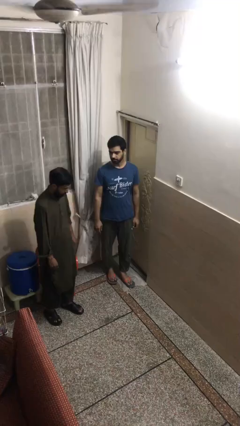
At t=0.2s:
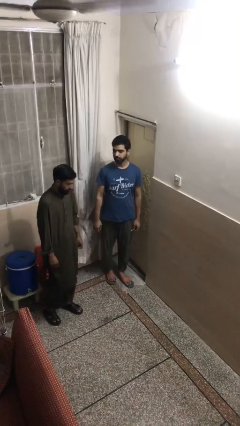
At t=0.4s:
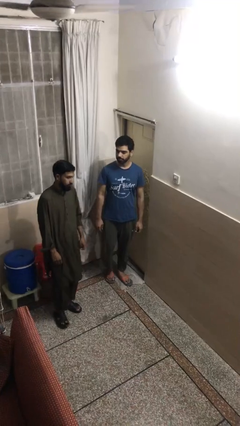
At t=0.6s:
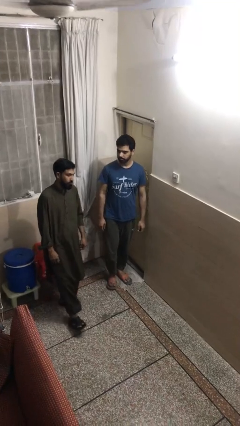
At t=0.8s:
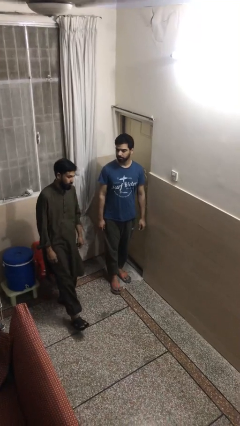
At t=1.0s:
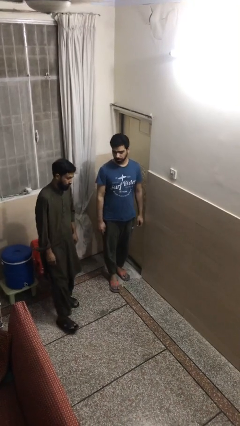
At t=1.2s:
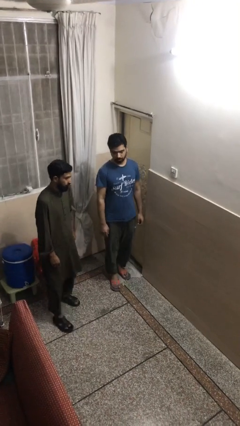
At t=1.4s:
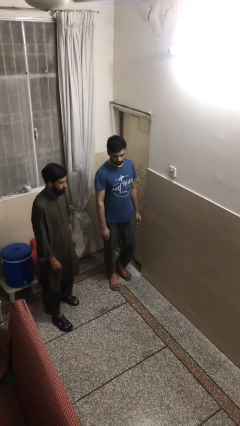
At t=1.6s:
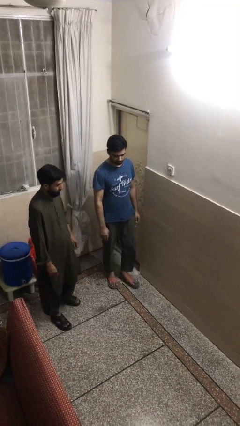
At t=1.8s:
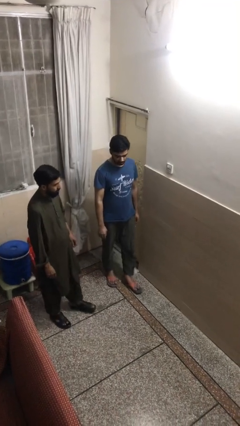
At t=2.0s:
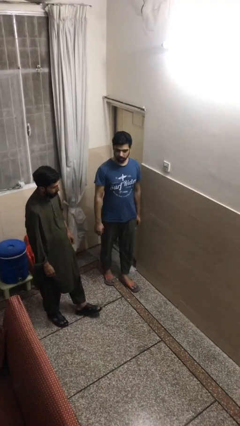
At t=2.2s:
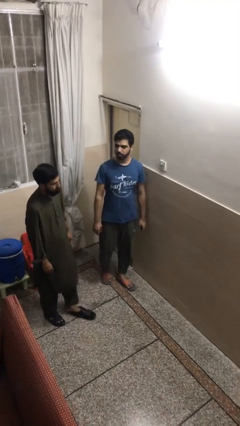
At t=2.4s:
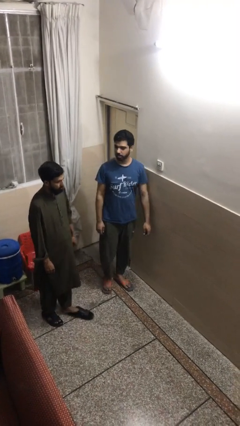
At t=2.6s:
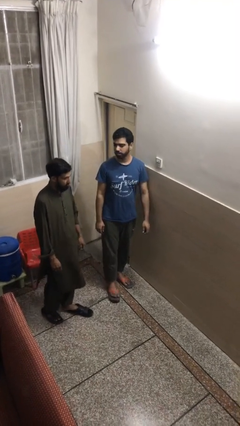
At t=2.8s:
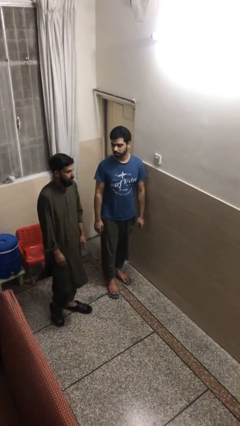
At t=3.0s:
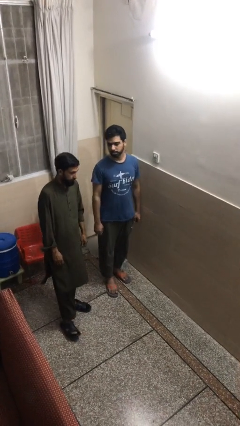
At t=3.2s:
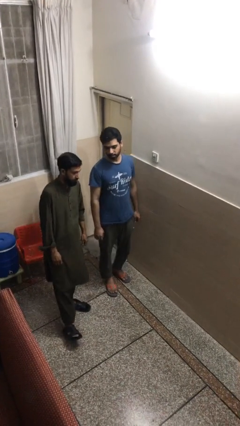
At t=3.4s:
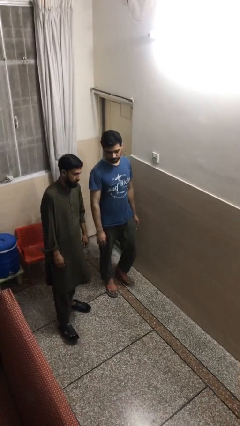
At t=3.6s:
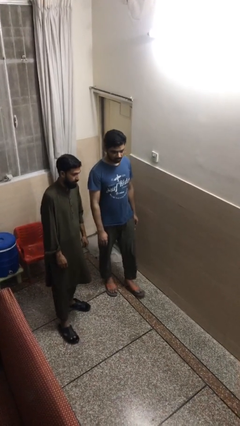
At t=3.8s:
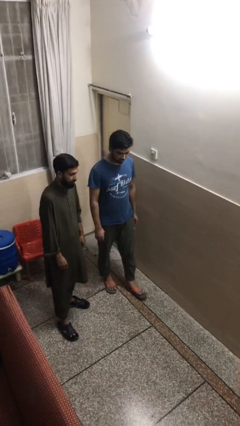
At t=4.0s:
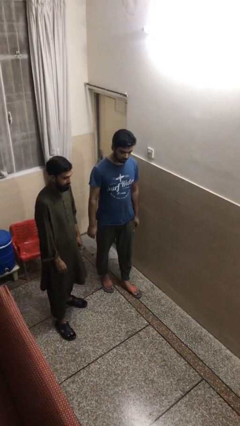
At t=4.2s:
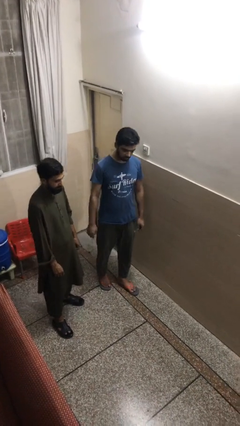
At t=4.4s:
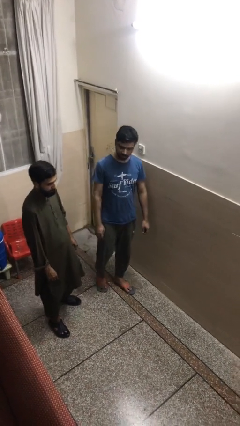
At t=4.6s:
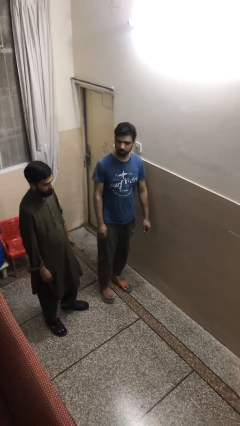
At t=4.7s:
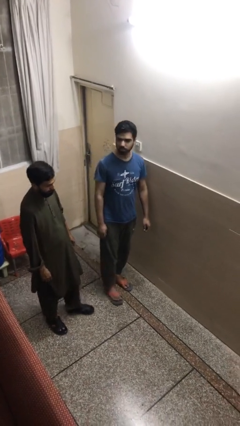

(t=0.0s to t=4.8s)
person talks to person

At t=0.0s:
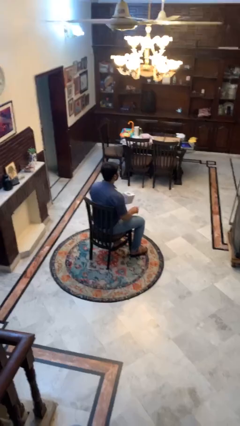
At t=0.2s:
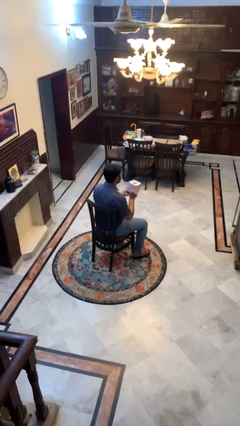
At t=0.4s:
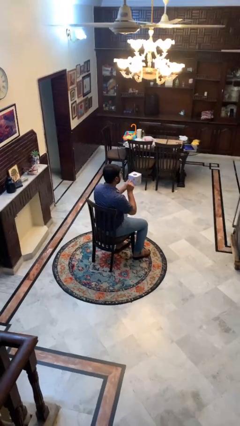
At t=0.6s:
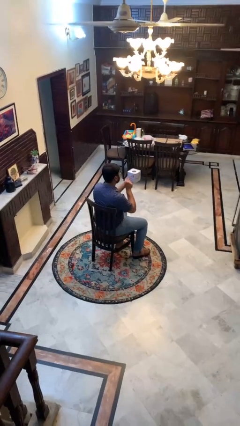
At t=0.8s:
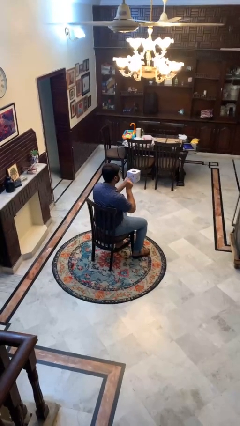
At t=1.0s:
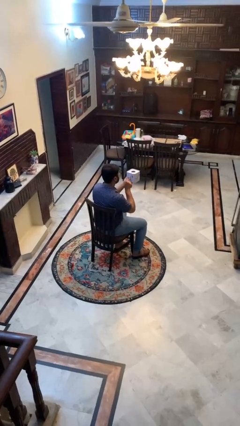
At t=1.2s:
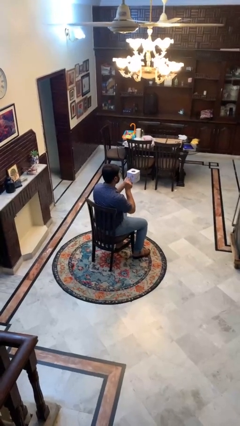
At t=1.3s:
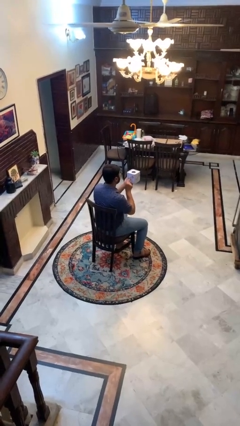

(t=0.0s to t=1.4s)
person taps object with finger

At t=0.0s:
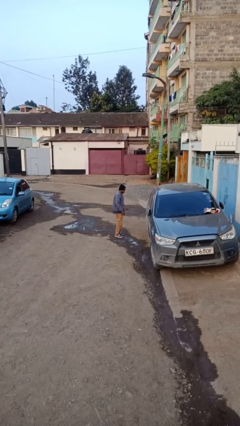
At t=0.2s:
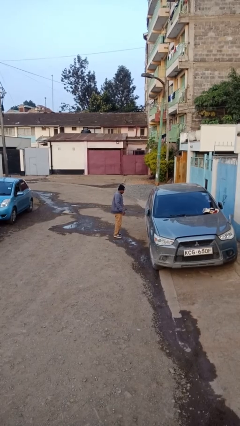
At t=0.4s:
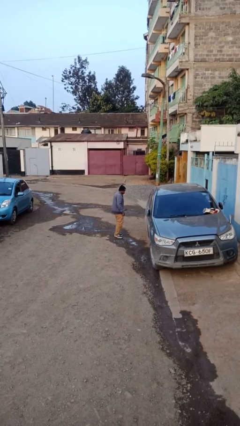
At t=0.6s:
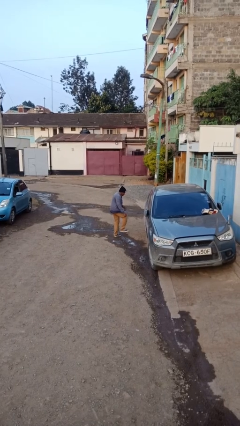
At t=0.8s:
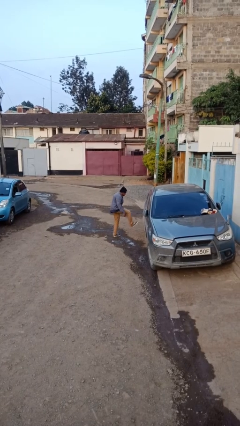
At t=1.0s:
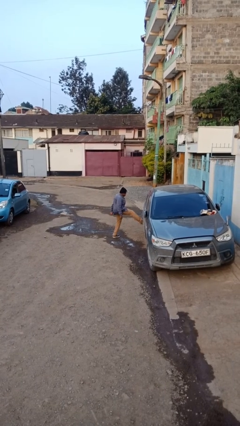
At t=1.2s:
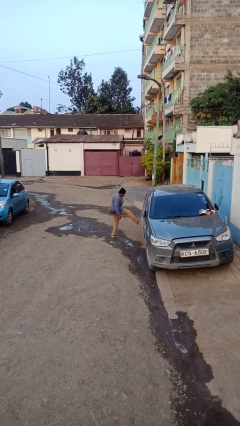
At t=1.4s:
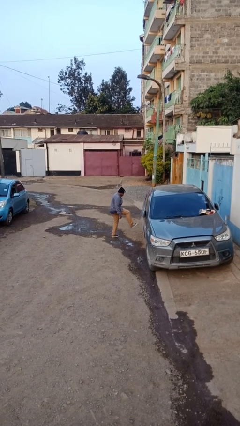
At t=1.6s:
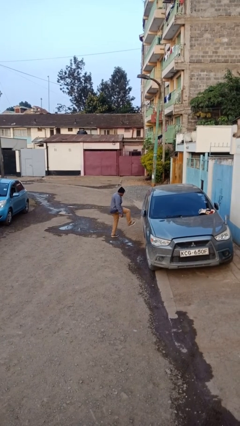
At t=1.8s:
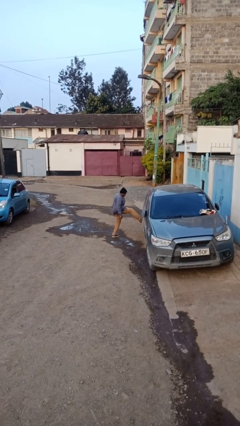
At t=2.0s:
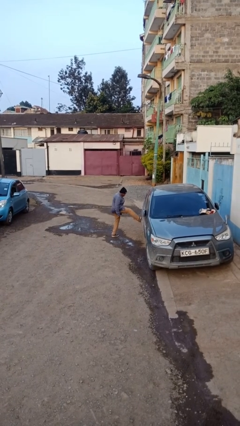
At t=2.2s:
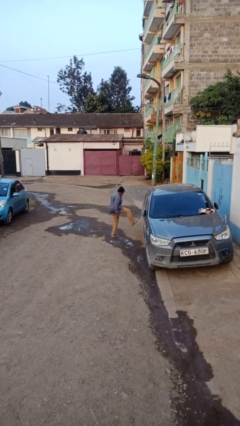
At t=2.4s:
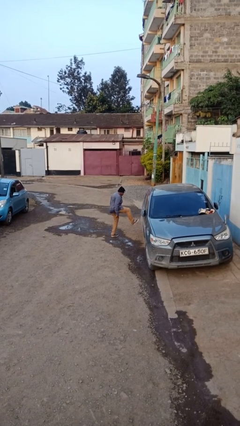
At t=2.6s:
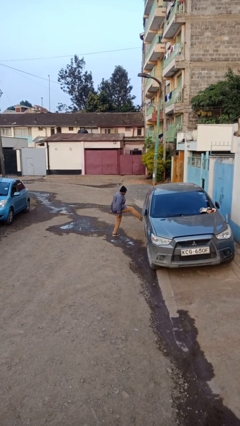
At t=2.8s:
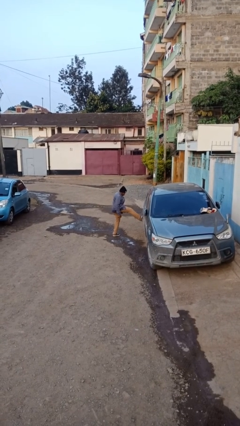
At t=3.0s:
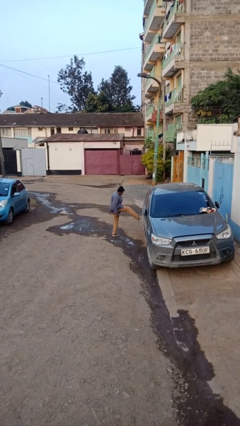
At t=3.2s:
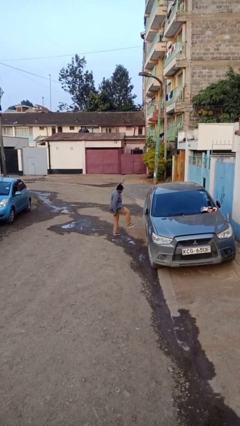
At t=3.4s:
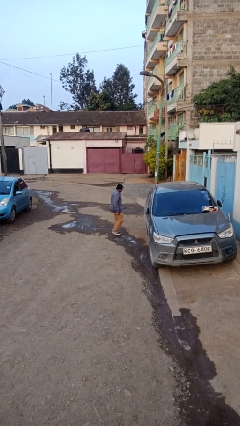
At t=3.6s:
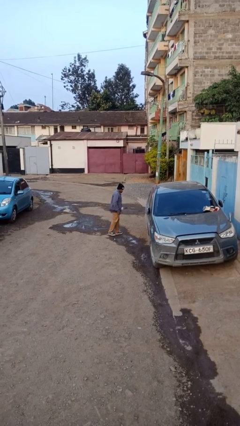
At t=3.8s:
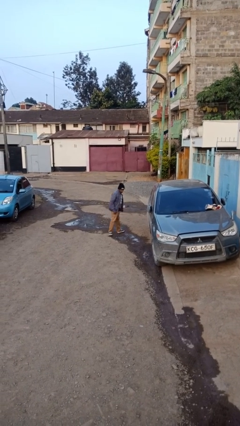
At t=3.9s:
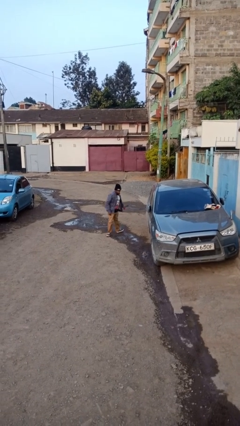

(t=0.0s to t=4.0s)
person kicks car tires

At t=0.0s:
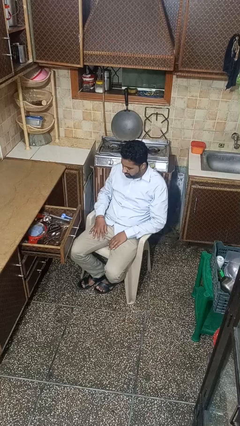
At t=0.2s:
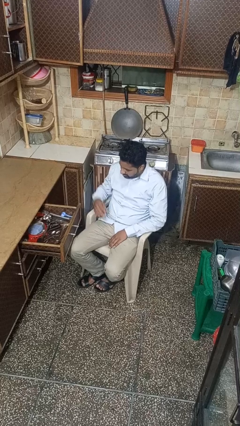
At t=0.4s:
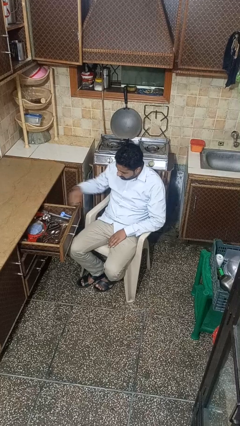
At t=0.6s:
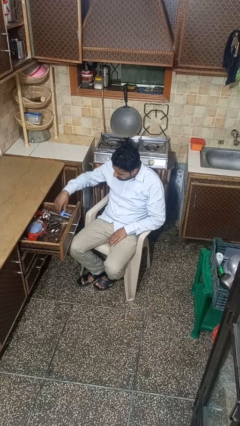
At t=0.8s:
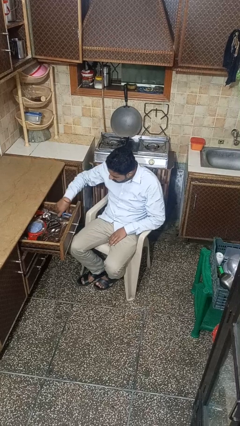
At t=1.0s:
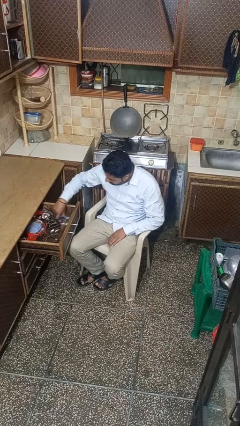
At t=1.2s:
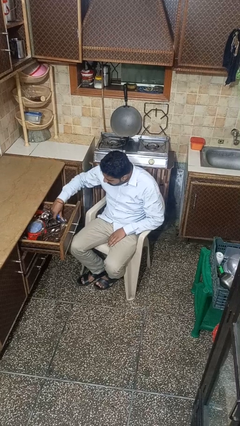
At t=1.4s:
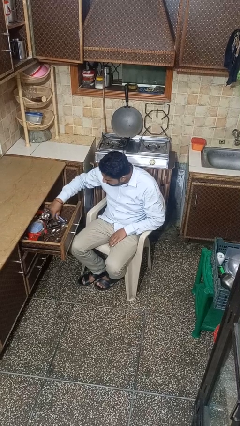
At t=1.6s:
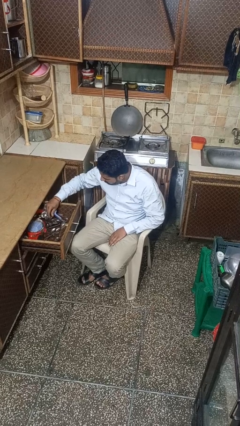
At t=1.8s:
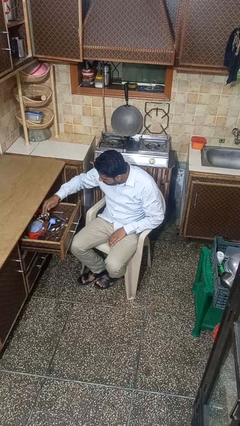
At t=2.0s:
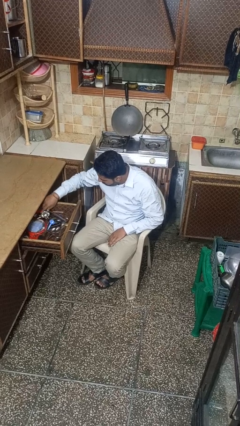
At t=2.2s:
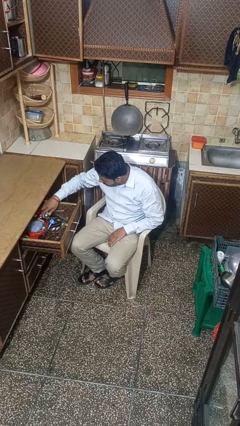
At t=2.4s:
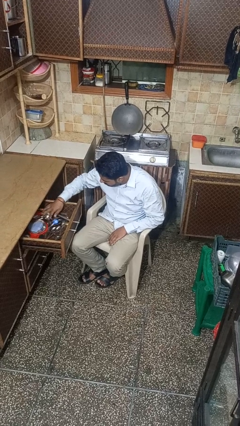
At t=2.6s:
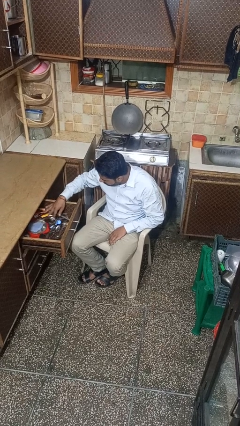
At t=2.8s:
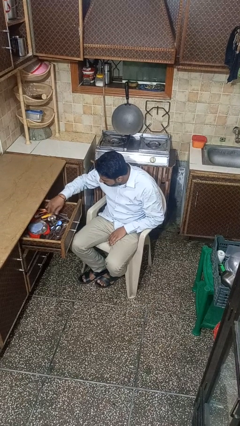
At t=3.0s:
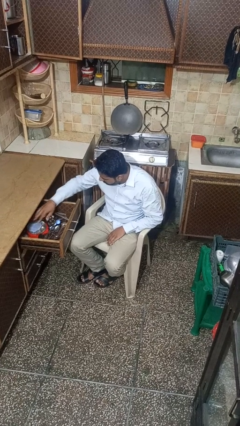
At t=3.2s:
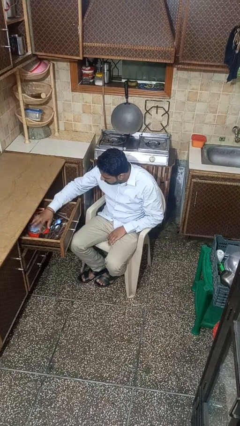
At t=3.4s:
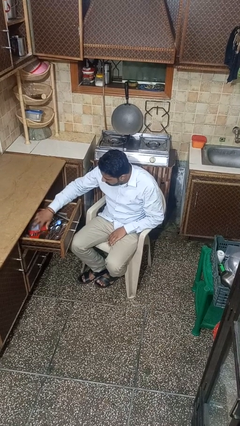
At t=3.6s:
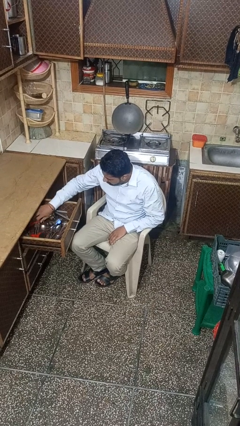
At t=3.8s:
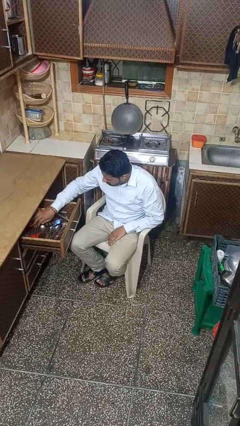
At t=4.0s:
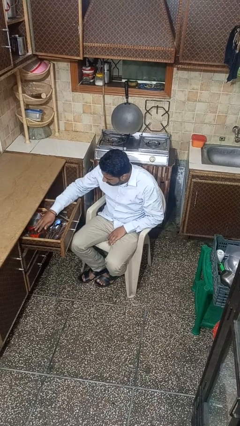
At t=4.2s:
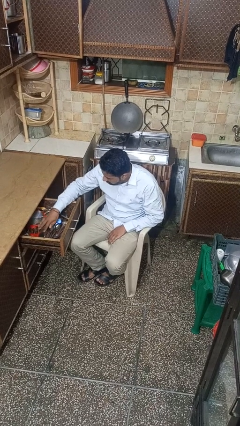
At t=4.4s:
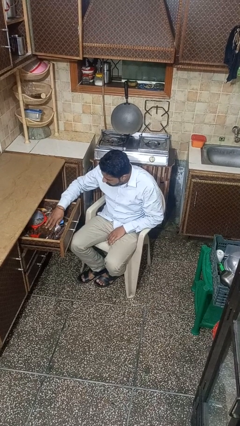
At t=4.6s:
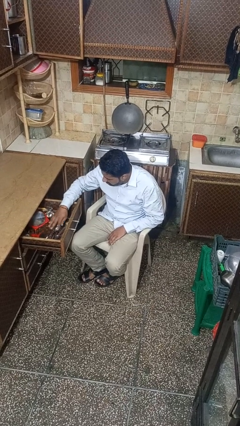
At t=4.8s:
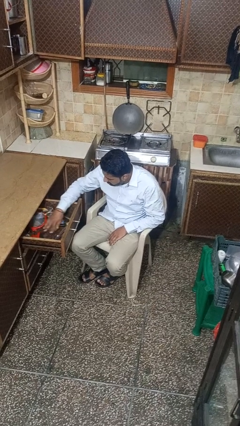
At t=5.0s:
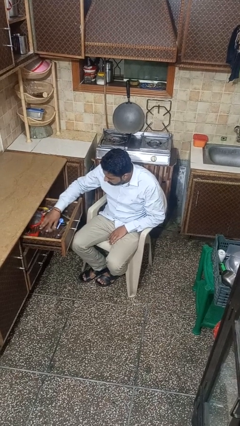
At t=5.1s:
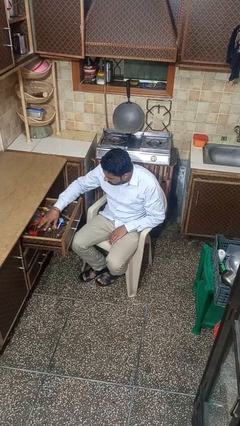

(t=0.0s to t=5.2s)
person searches in kitchen drawer

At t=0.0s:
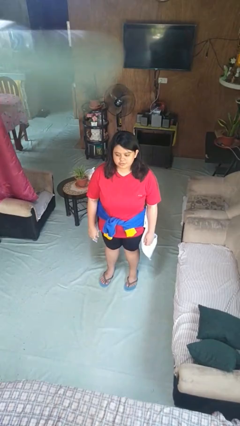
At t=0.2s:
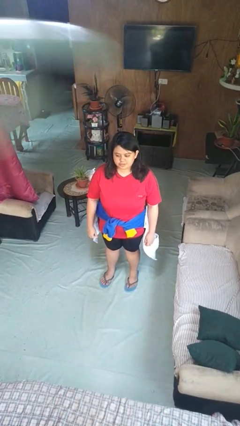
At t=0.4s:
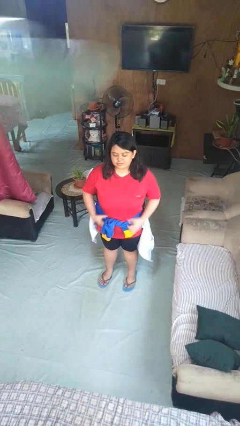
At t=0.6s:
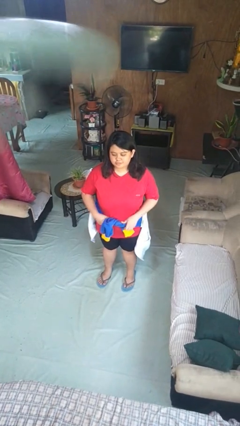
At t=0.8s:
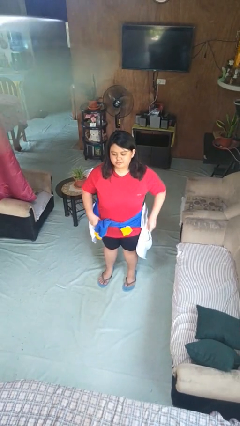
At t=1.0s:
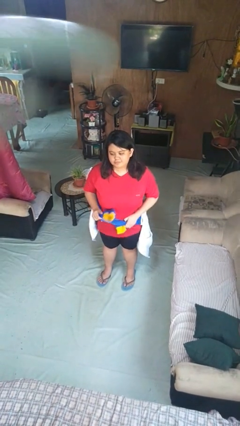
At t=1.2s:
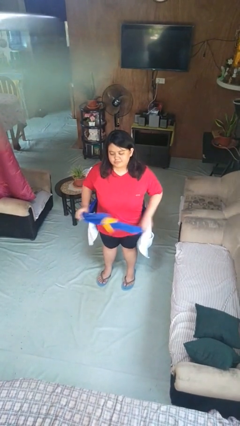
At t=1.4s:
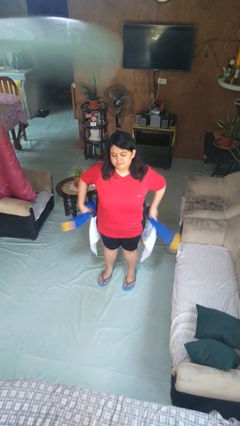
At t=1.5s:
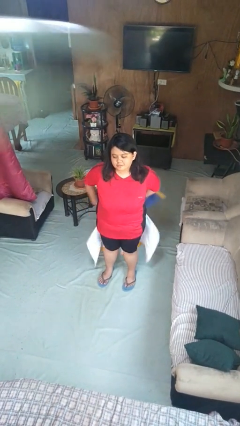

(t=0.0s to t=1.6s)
person unties jacket around waist

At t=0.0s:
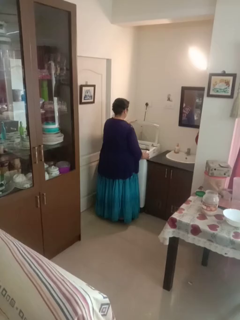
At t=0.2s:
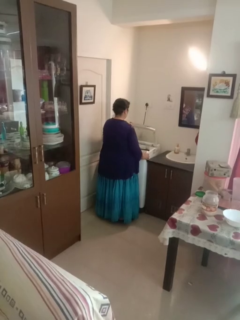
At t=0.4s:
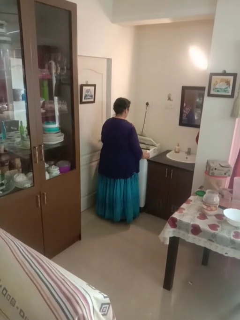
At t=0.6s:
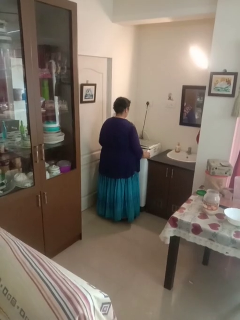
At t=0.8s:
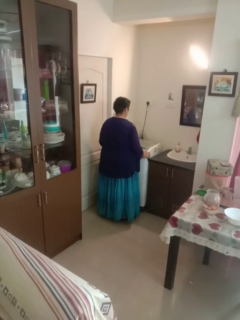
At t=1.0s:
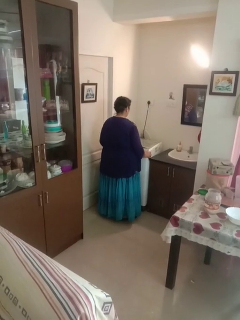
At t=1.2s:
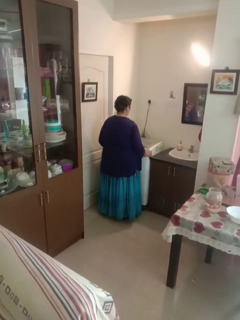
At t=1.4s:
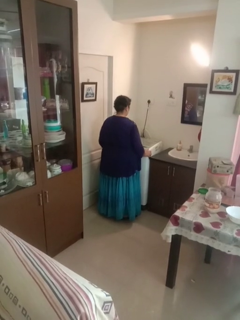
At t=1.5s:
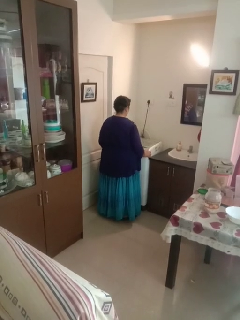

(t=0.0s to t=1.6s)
person closes clothes washer
